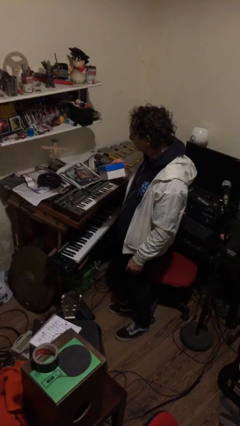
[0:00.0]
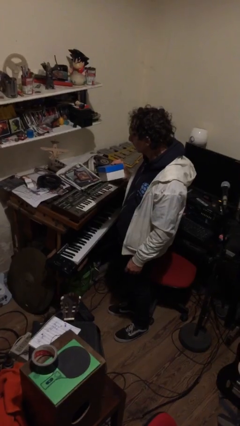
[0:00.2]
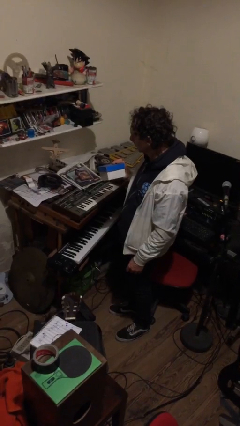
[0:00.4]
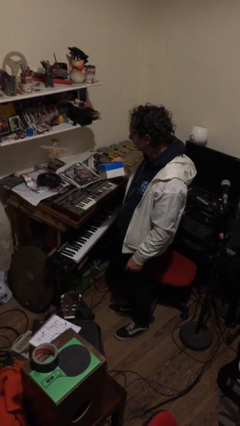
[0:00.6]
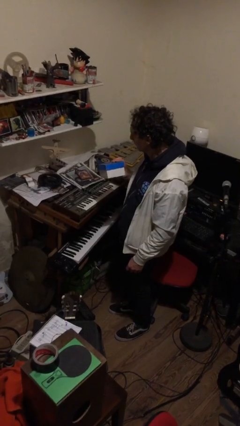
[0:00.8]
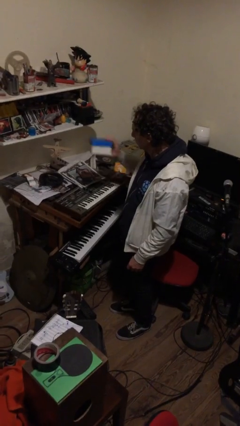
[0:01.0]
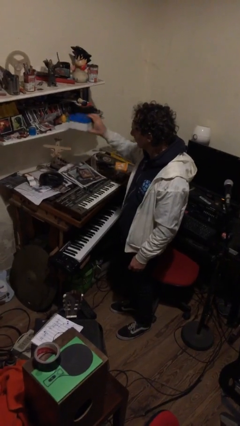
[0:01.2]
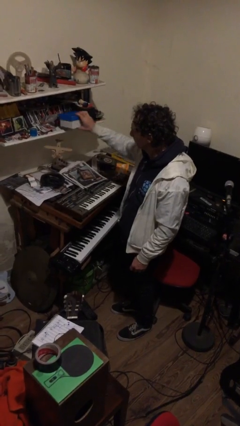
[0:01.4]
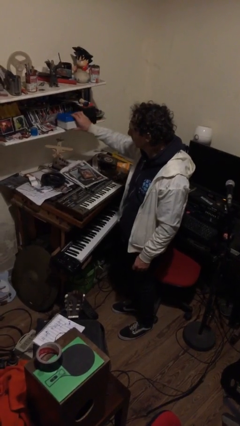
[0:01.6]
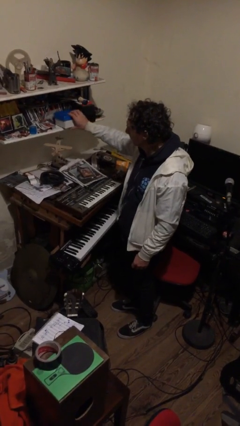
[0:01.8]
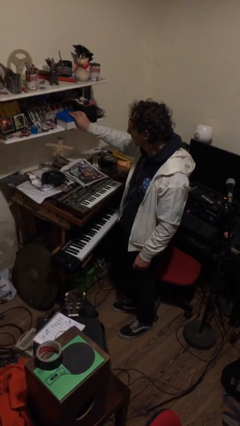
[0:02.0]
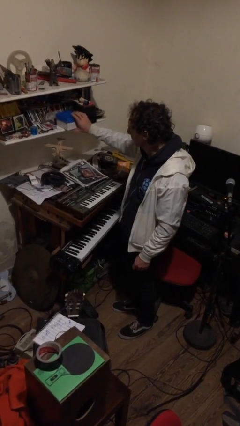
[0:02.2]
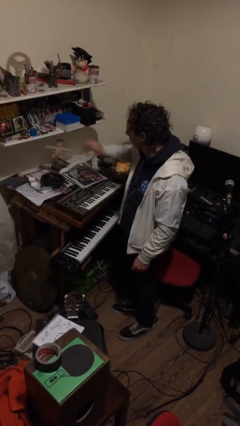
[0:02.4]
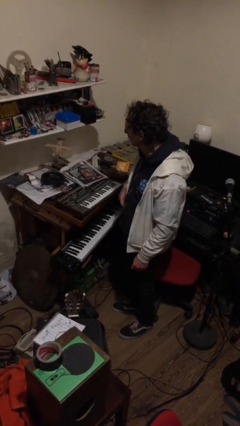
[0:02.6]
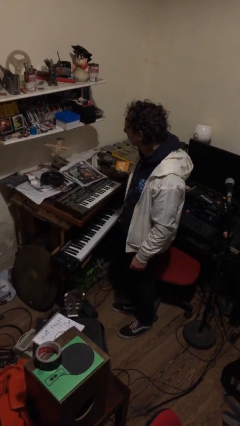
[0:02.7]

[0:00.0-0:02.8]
person puts down object on countertop

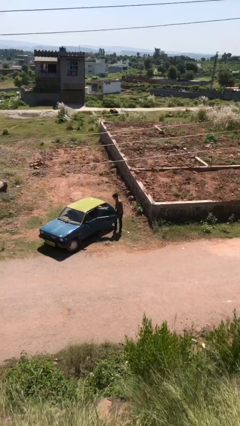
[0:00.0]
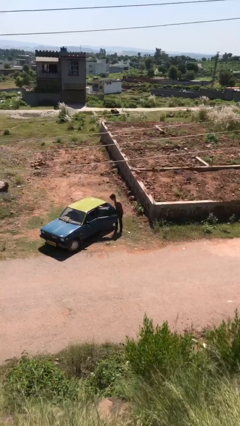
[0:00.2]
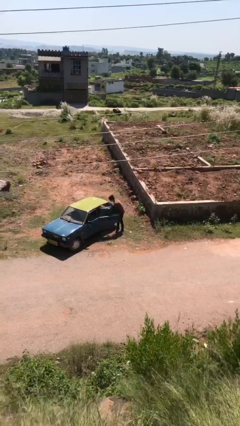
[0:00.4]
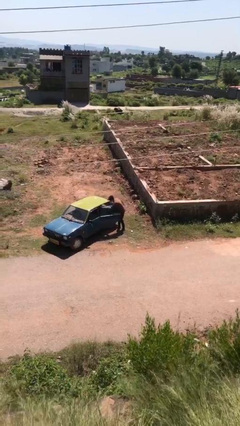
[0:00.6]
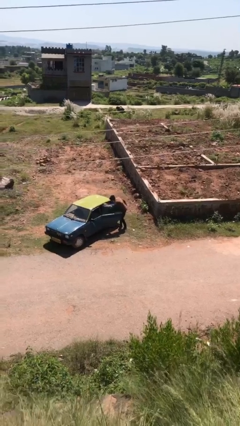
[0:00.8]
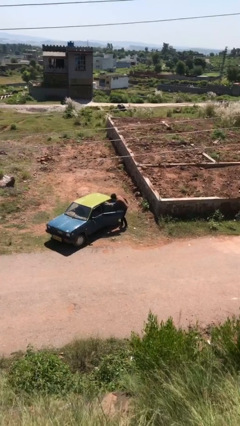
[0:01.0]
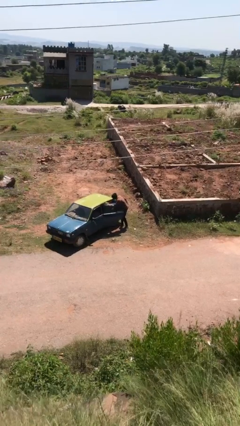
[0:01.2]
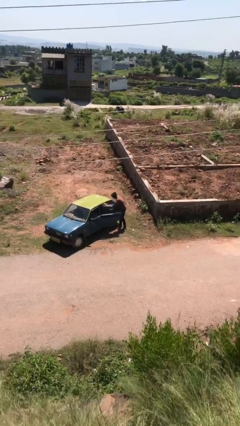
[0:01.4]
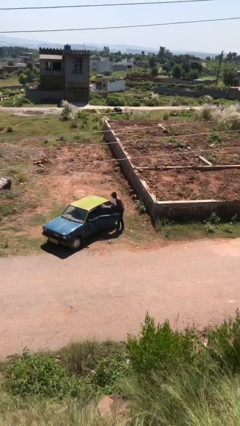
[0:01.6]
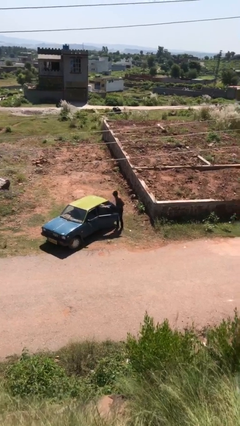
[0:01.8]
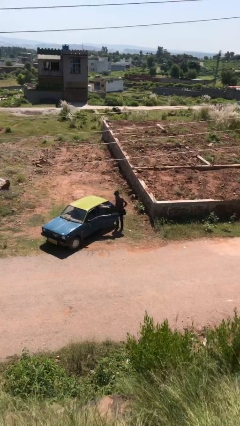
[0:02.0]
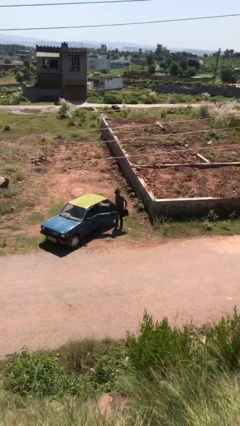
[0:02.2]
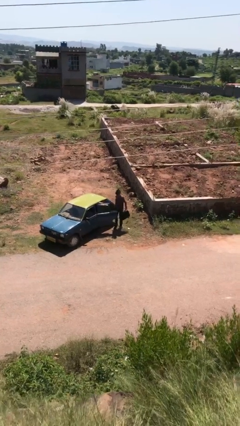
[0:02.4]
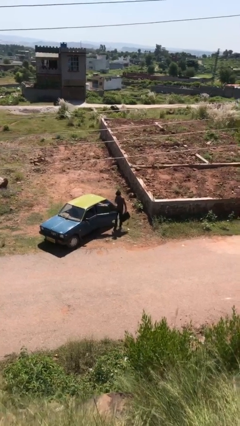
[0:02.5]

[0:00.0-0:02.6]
person unloads car

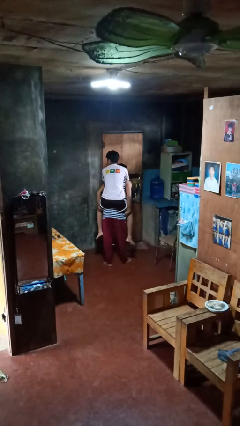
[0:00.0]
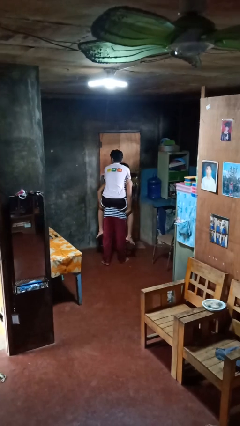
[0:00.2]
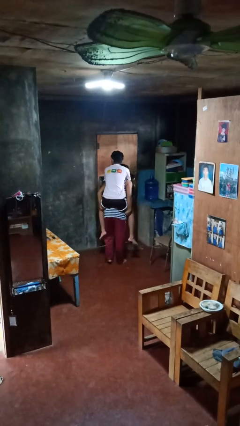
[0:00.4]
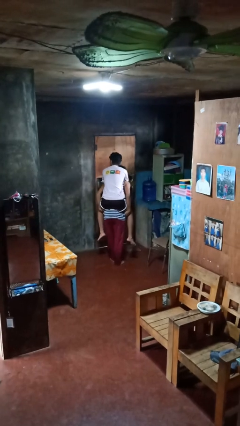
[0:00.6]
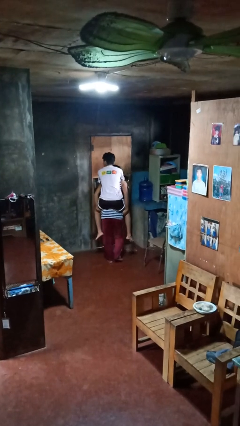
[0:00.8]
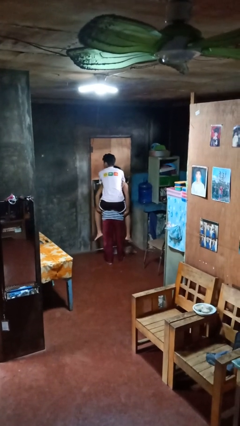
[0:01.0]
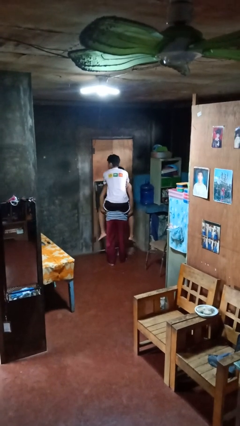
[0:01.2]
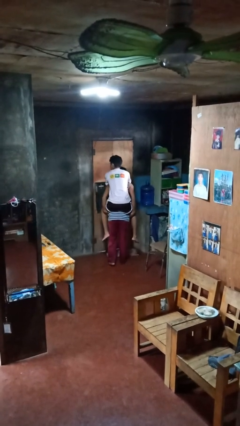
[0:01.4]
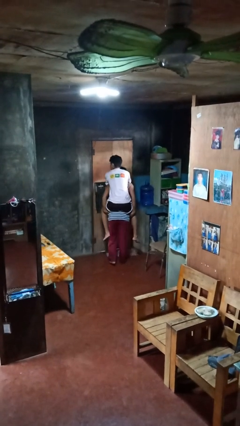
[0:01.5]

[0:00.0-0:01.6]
person carries person on back

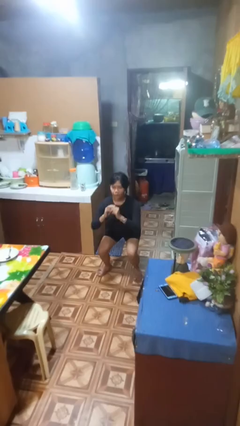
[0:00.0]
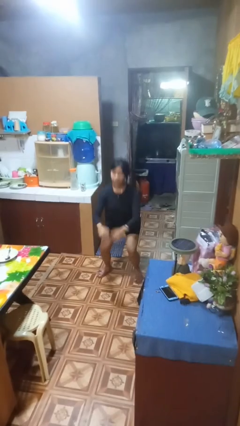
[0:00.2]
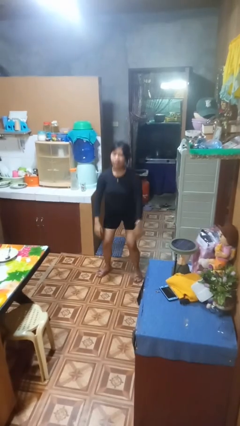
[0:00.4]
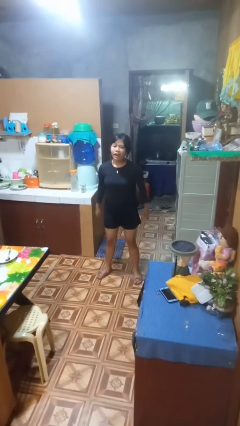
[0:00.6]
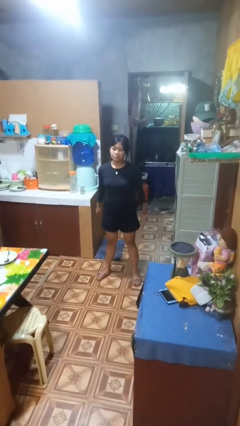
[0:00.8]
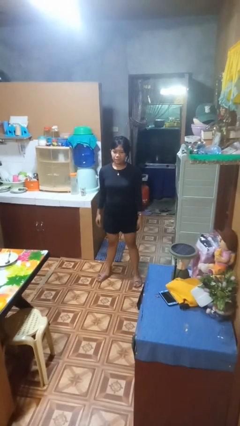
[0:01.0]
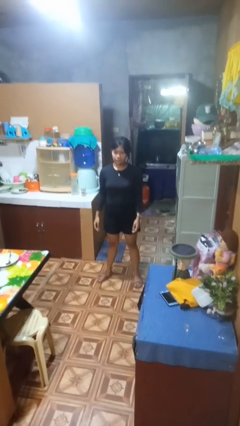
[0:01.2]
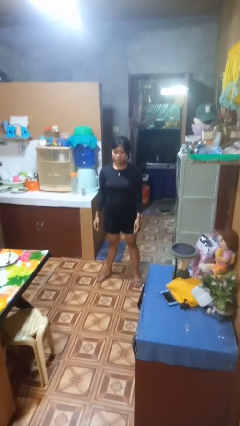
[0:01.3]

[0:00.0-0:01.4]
person stands up

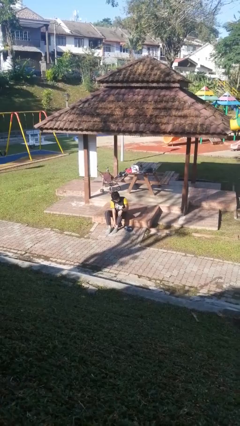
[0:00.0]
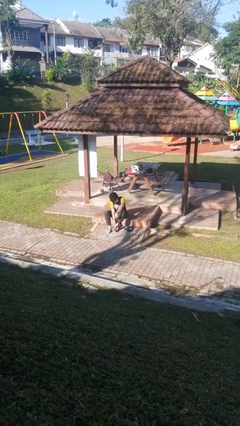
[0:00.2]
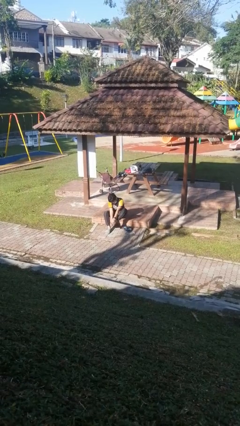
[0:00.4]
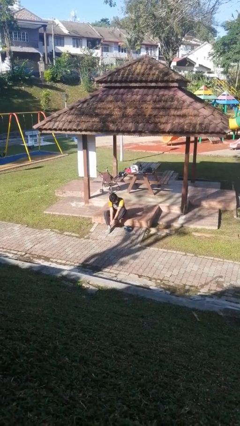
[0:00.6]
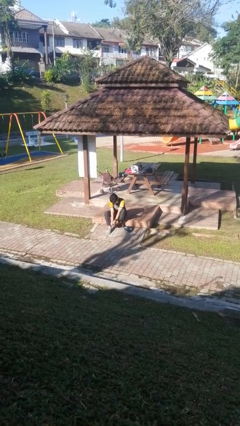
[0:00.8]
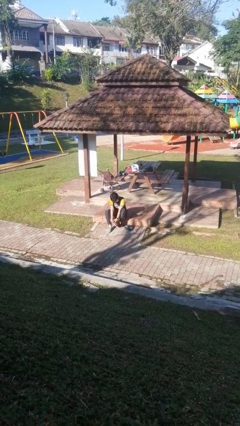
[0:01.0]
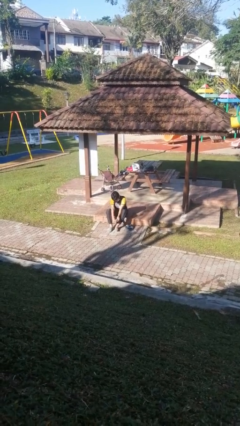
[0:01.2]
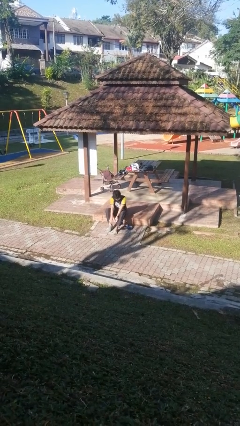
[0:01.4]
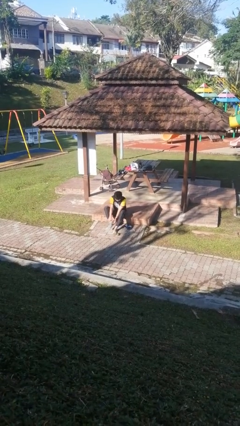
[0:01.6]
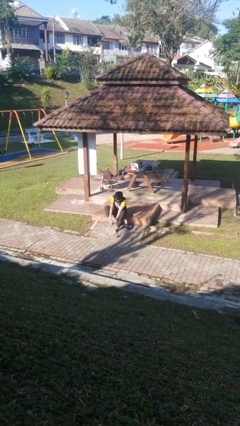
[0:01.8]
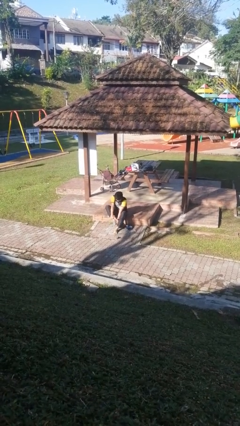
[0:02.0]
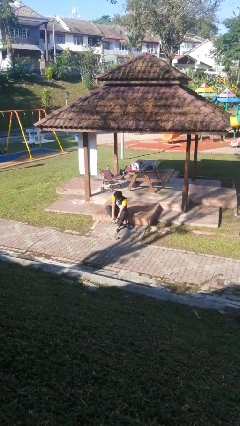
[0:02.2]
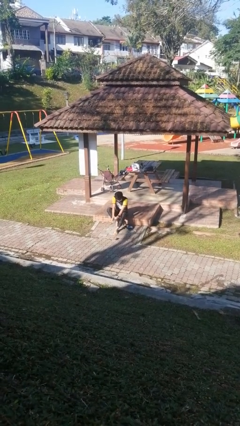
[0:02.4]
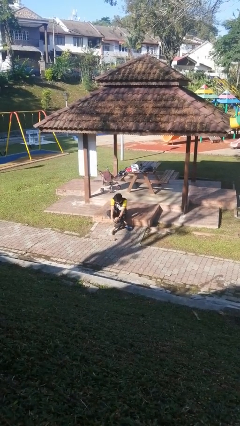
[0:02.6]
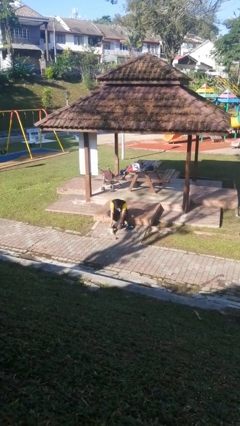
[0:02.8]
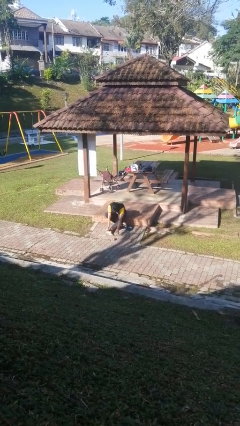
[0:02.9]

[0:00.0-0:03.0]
person takes off socks

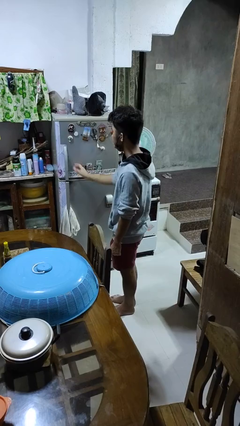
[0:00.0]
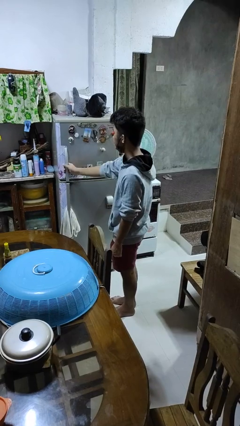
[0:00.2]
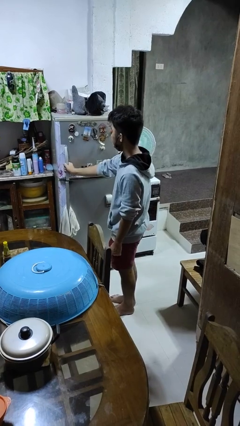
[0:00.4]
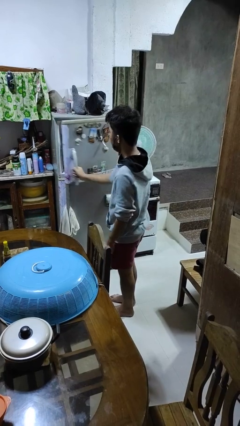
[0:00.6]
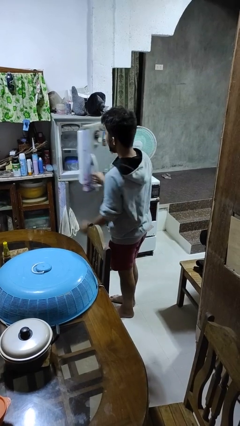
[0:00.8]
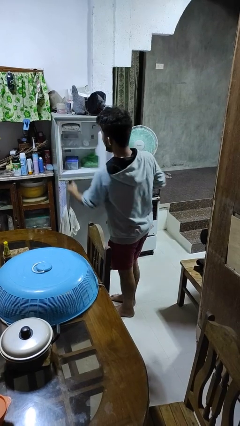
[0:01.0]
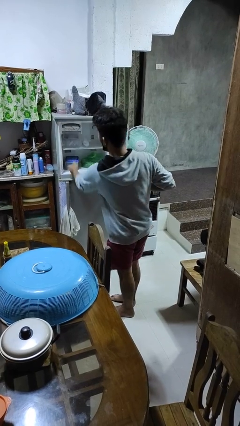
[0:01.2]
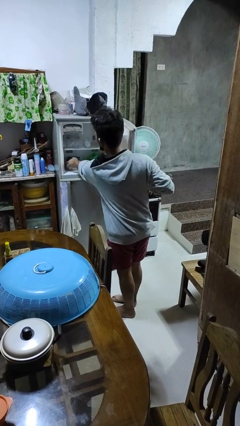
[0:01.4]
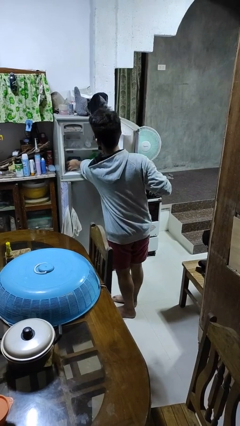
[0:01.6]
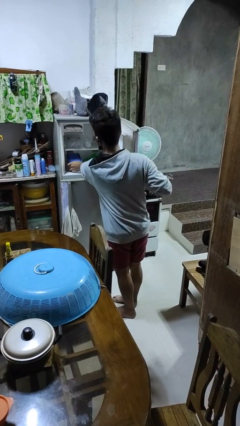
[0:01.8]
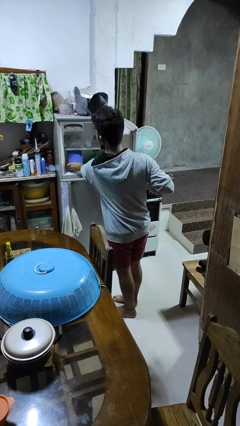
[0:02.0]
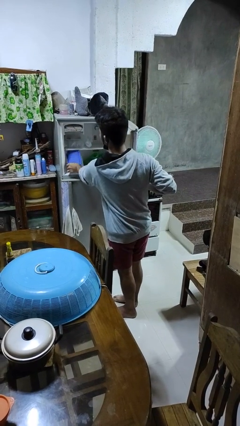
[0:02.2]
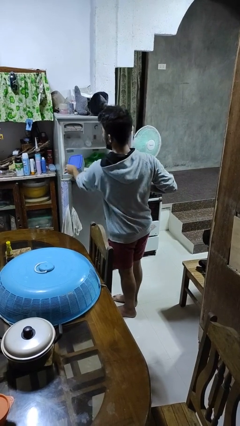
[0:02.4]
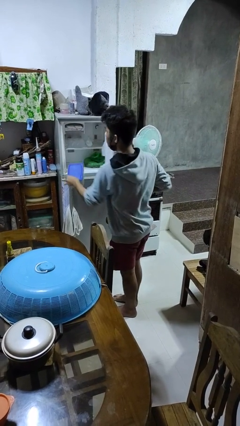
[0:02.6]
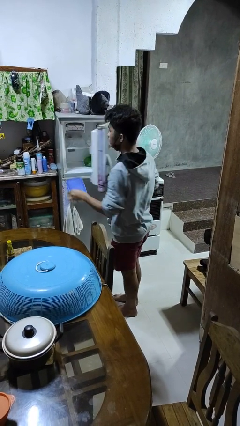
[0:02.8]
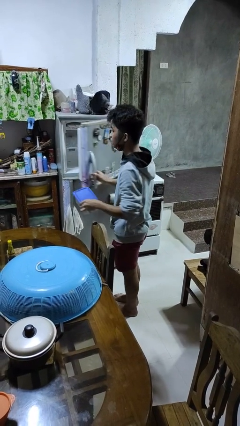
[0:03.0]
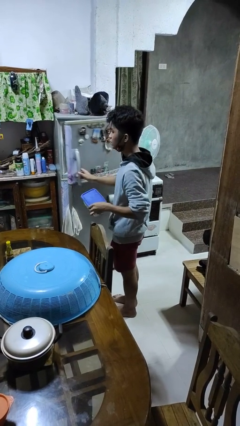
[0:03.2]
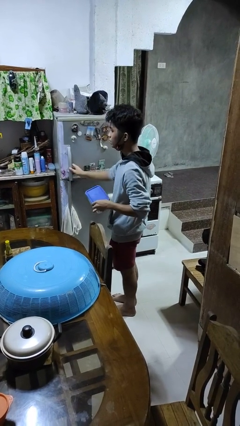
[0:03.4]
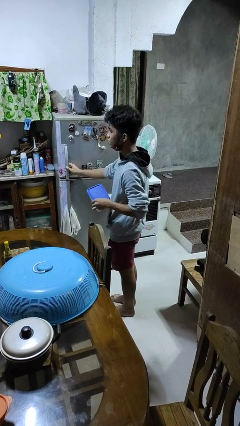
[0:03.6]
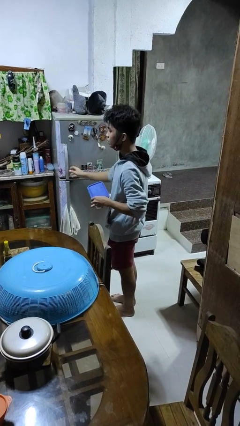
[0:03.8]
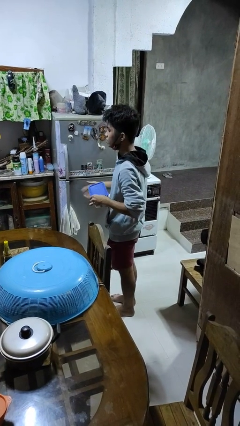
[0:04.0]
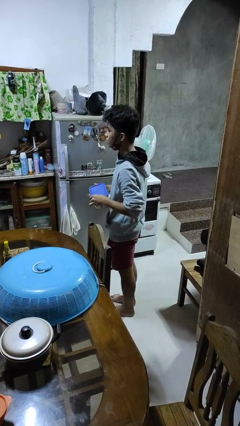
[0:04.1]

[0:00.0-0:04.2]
person takes object from refrigerator

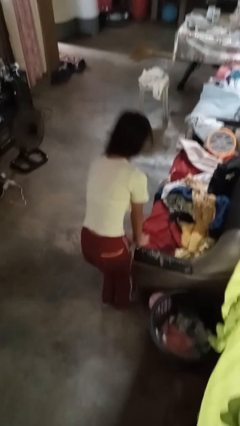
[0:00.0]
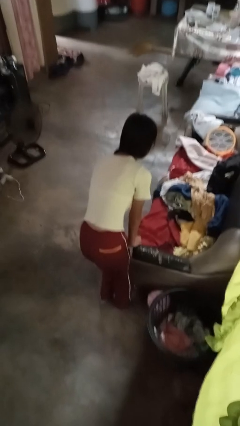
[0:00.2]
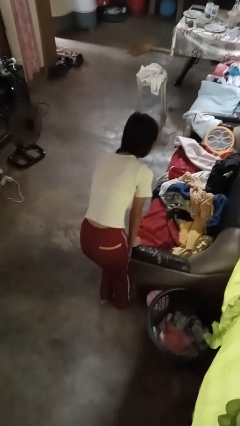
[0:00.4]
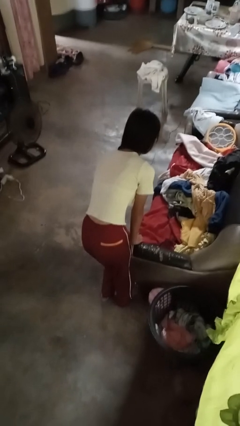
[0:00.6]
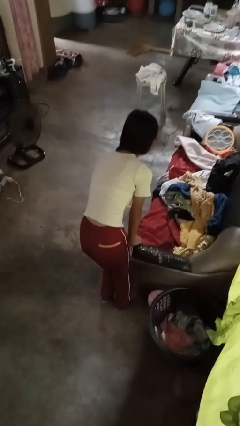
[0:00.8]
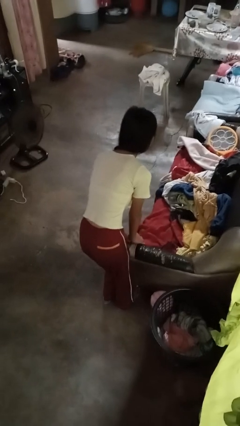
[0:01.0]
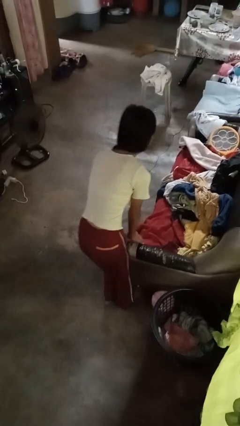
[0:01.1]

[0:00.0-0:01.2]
person stubs toe
